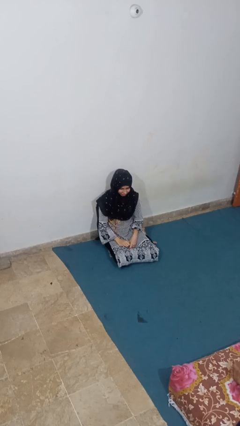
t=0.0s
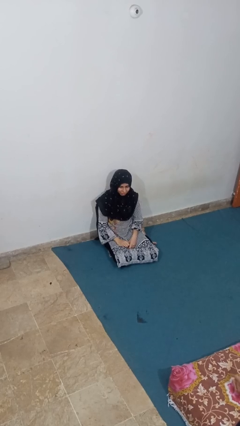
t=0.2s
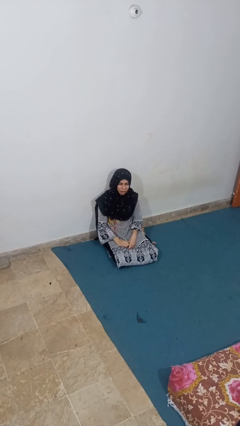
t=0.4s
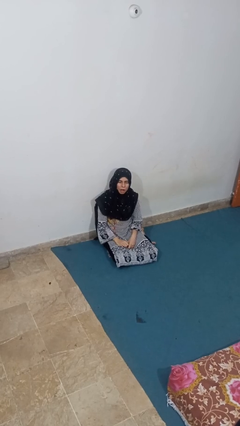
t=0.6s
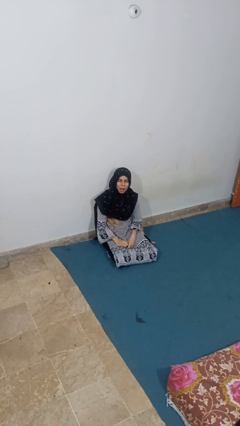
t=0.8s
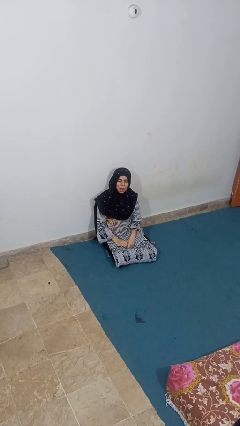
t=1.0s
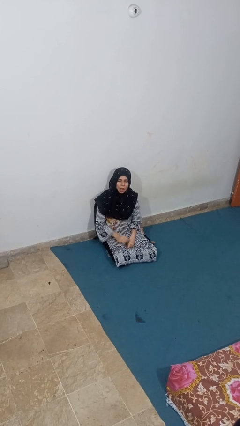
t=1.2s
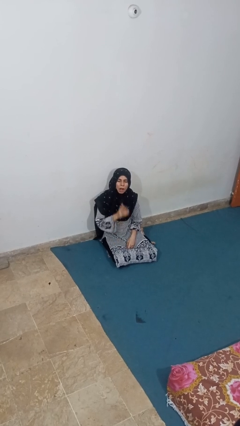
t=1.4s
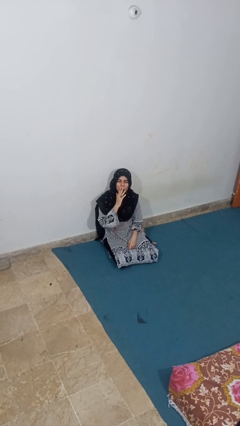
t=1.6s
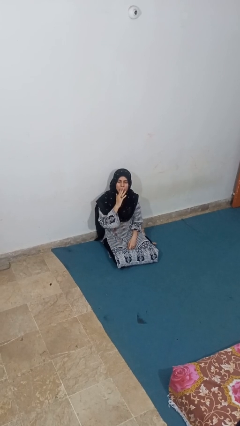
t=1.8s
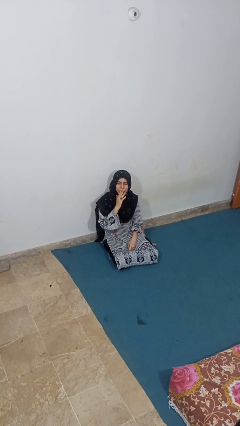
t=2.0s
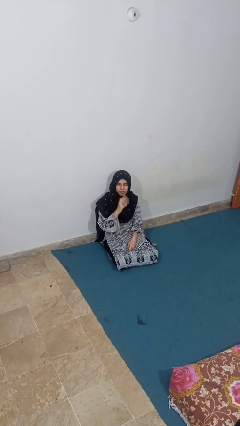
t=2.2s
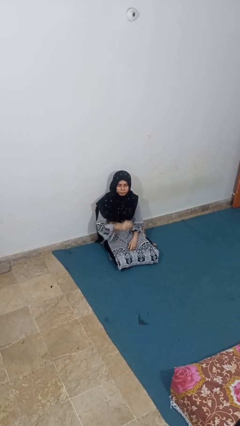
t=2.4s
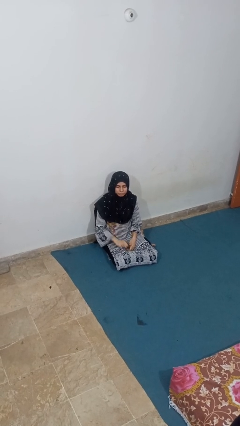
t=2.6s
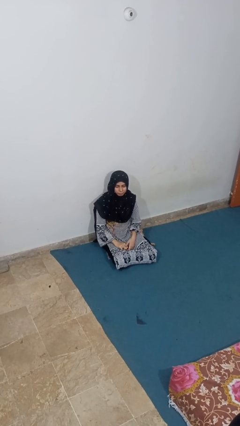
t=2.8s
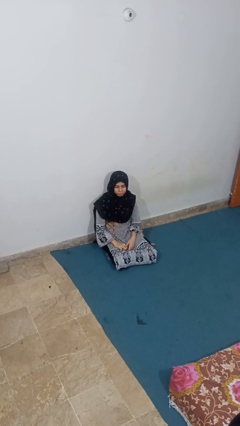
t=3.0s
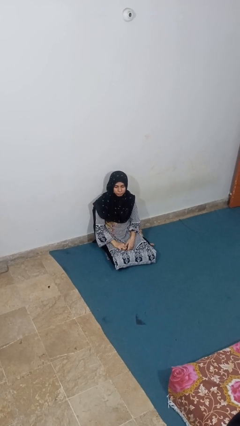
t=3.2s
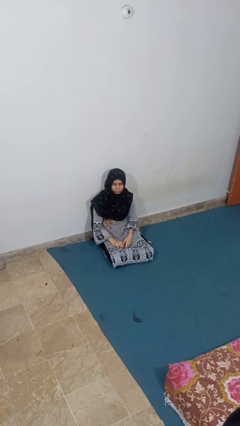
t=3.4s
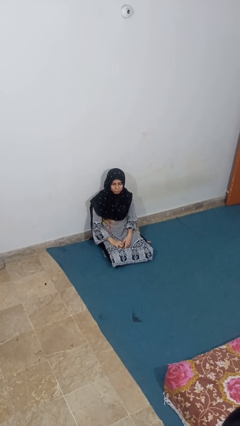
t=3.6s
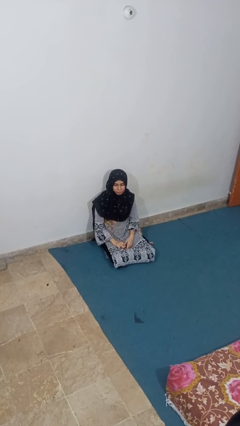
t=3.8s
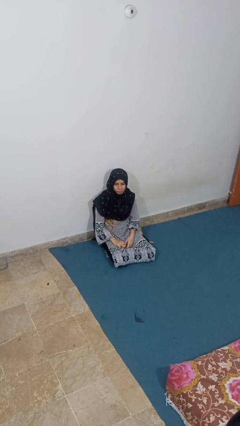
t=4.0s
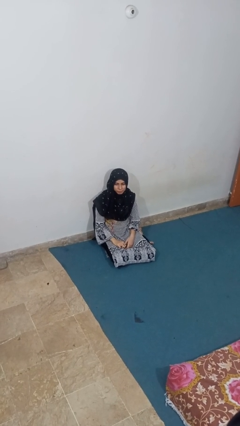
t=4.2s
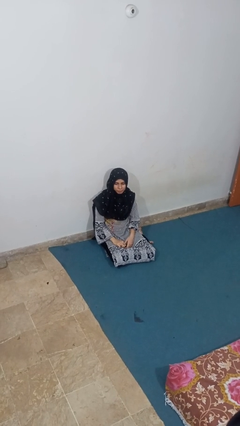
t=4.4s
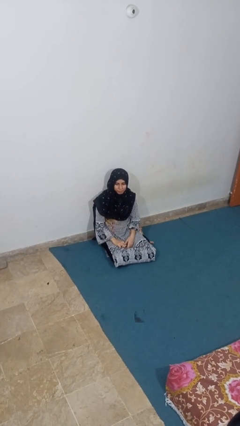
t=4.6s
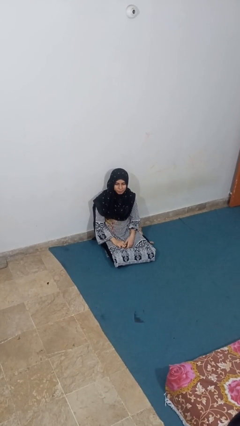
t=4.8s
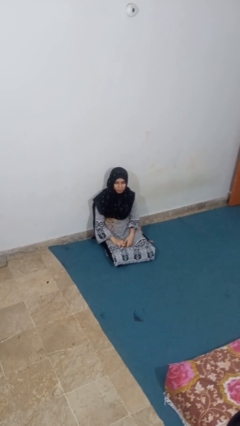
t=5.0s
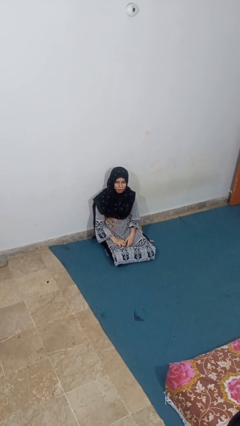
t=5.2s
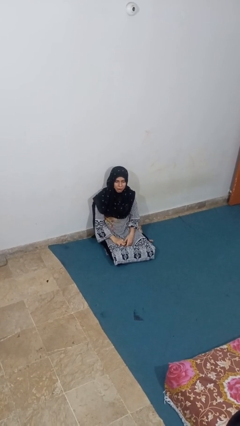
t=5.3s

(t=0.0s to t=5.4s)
person yawns

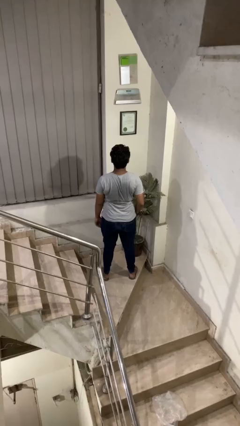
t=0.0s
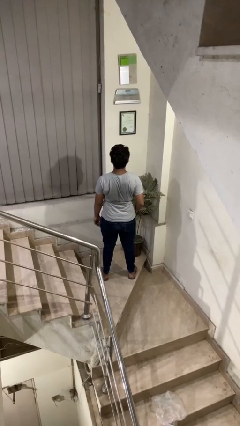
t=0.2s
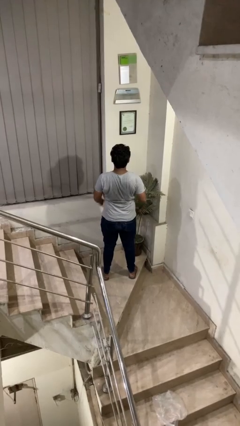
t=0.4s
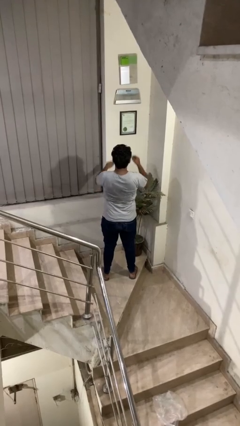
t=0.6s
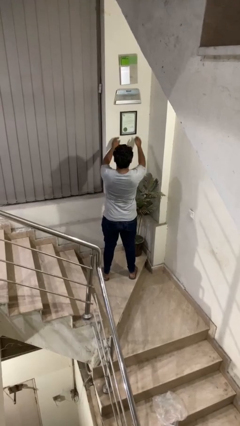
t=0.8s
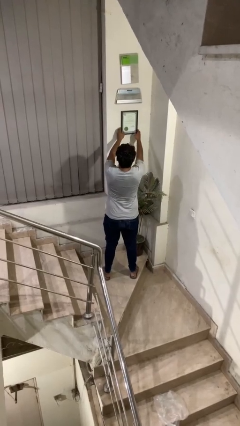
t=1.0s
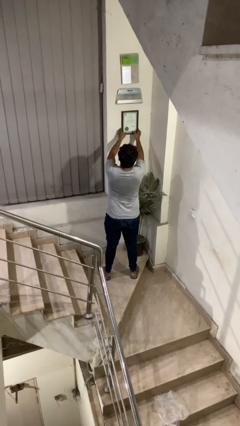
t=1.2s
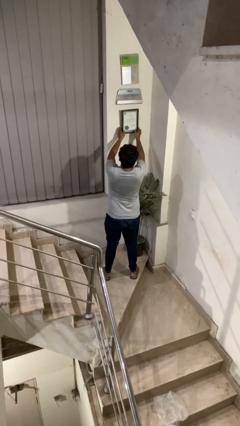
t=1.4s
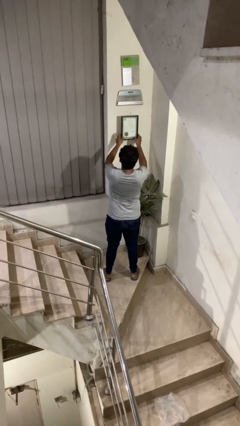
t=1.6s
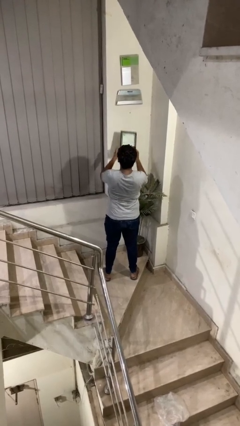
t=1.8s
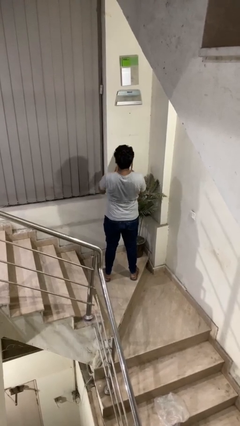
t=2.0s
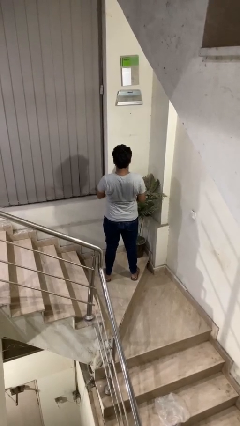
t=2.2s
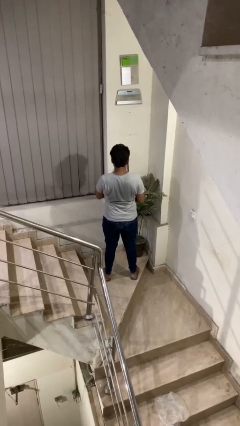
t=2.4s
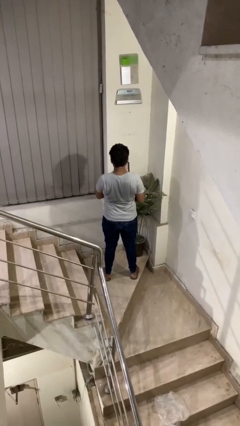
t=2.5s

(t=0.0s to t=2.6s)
person takes down picture frame

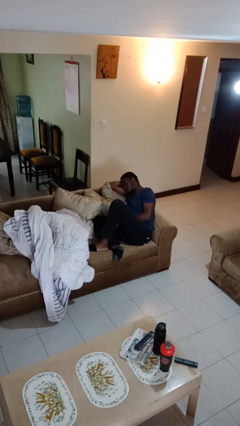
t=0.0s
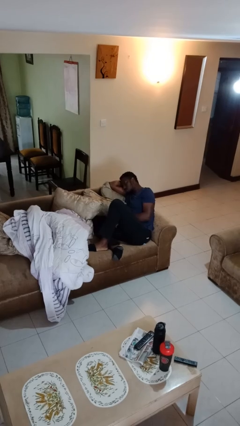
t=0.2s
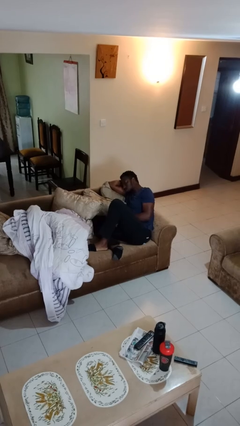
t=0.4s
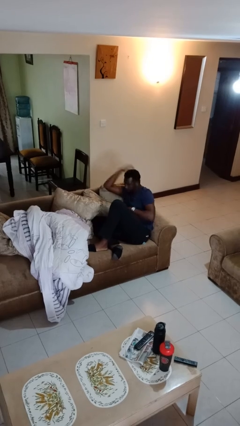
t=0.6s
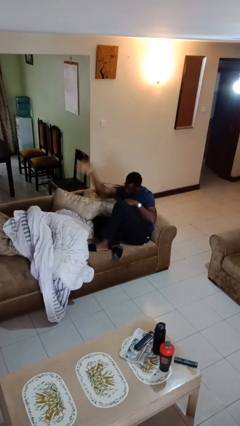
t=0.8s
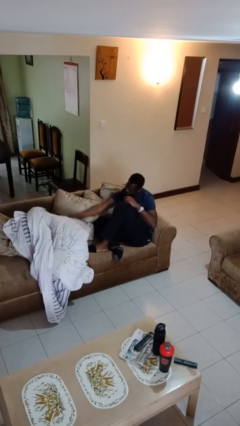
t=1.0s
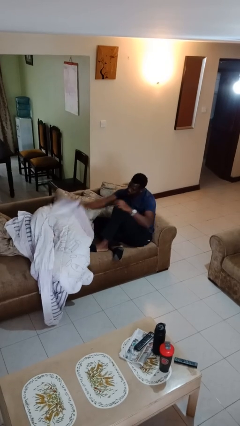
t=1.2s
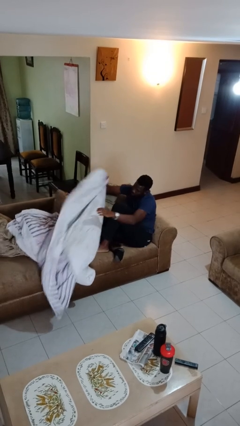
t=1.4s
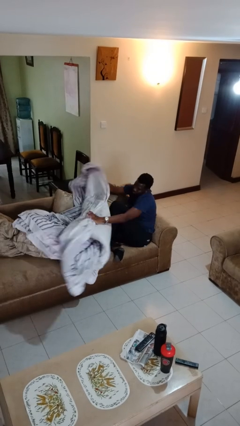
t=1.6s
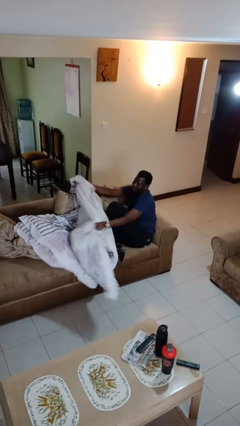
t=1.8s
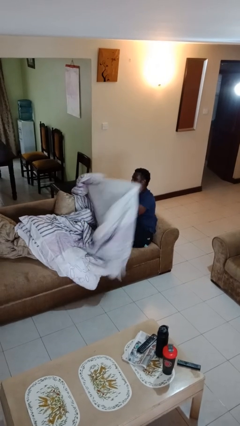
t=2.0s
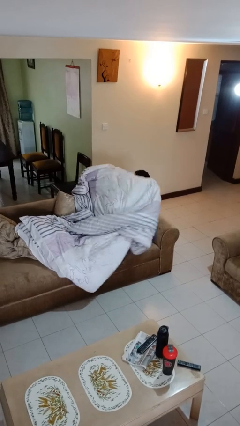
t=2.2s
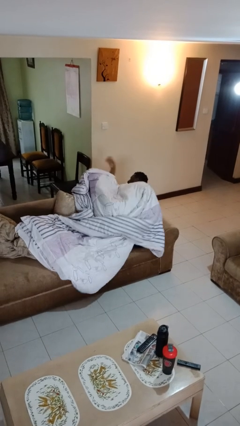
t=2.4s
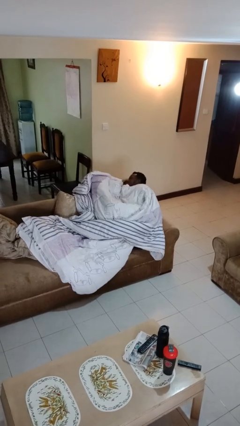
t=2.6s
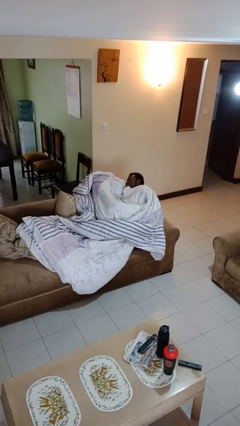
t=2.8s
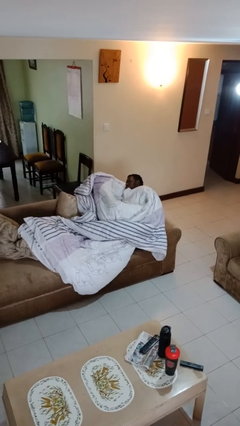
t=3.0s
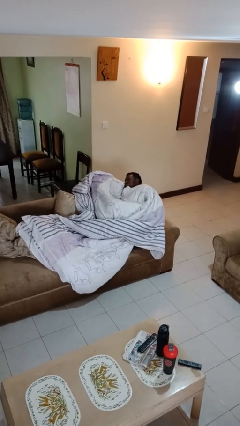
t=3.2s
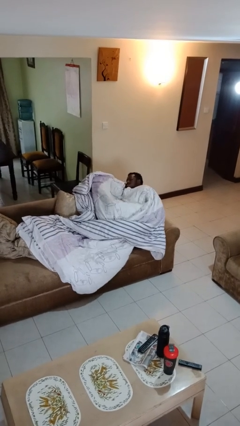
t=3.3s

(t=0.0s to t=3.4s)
person covers with blanket

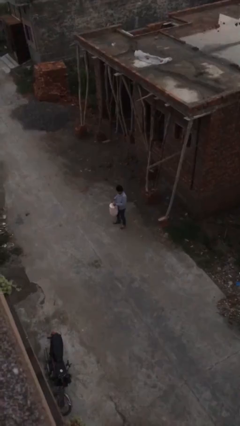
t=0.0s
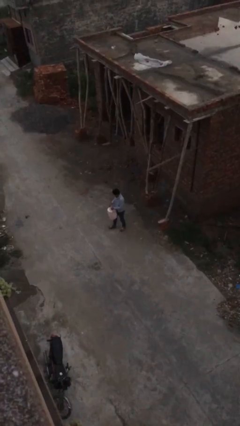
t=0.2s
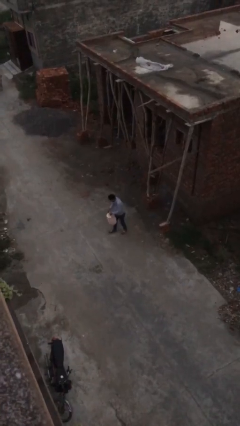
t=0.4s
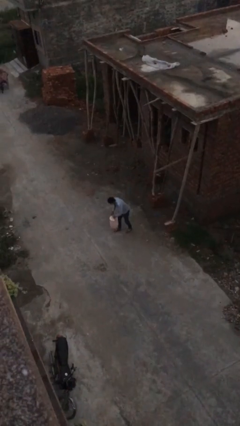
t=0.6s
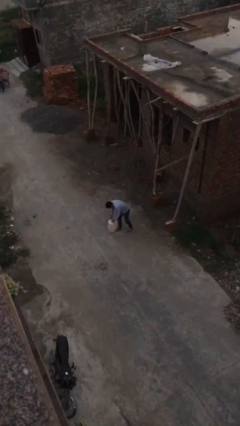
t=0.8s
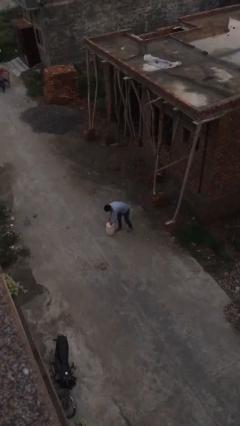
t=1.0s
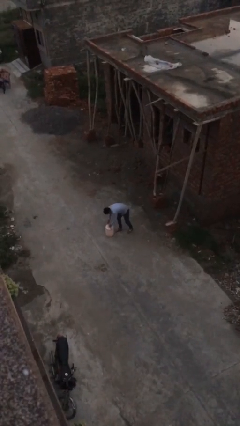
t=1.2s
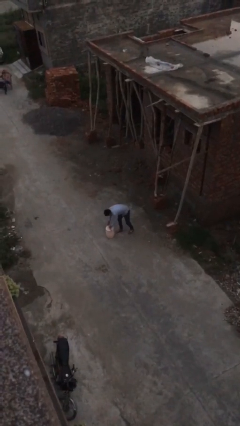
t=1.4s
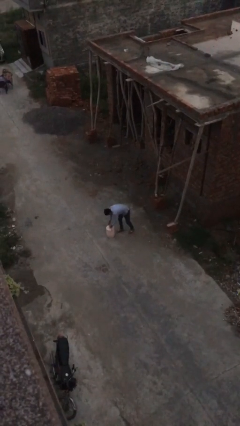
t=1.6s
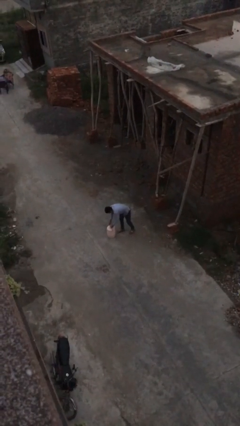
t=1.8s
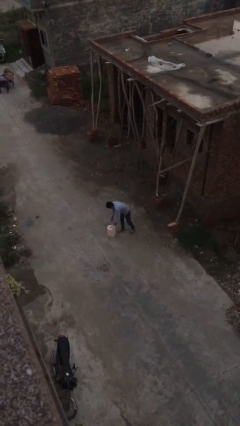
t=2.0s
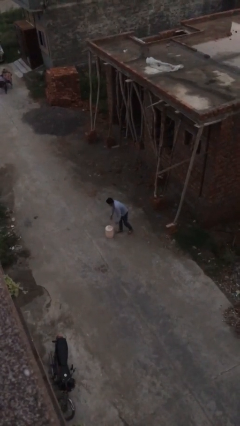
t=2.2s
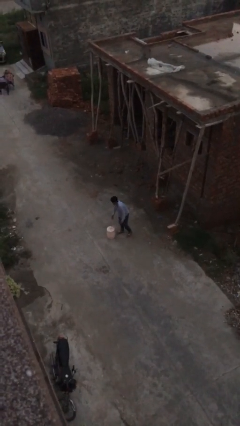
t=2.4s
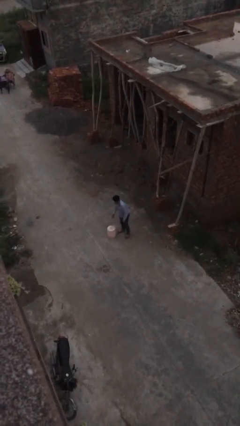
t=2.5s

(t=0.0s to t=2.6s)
person puts down object on floor

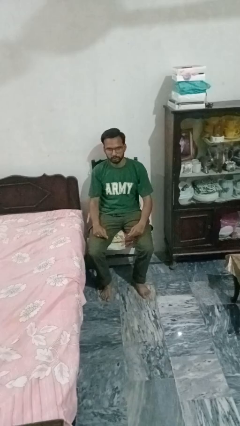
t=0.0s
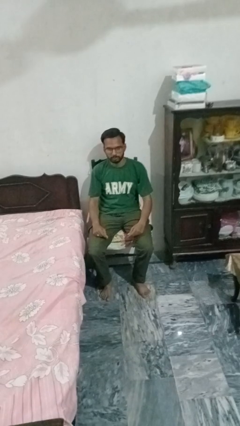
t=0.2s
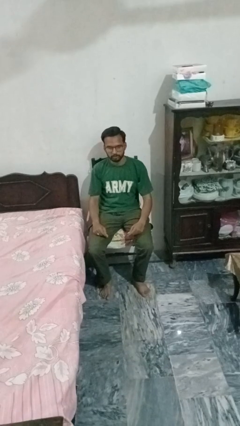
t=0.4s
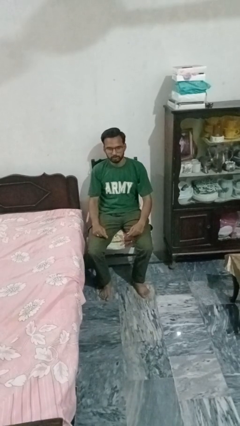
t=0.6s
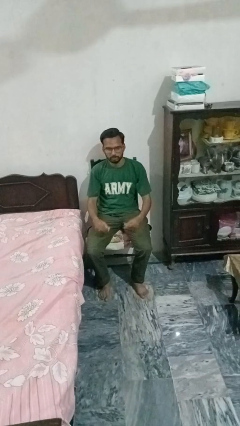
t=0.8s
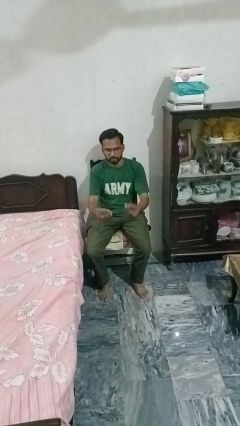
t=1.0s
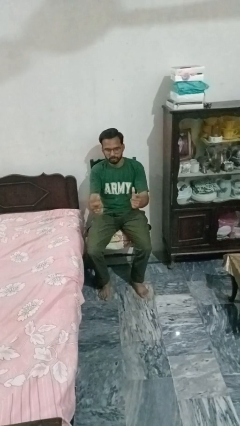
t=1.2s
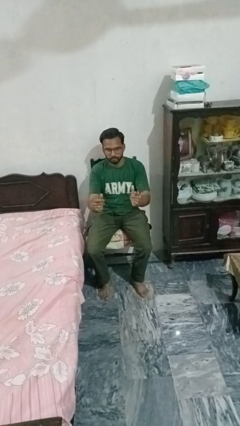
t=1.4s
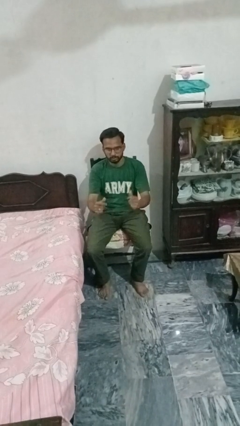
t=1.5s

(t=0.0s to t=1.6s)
person snaps fingers

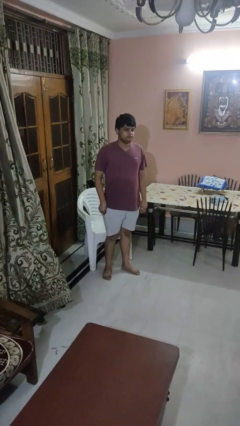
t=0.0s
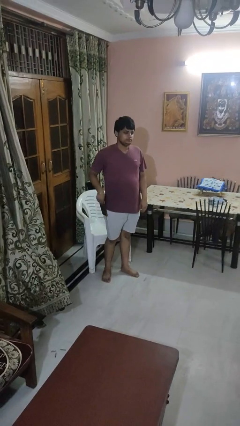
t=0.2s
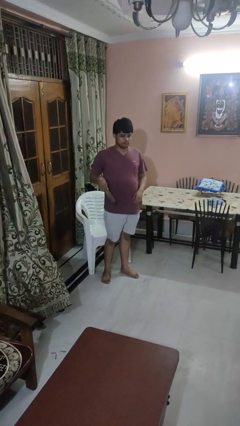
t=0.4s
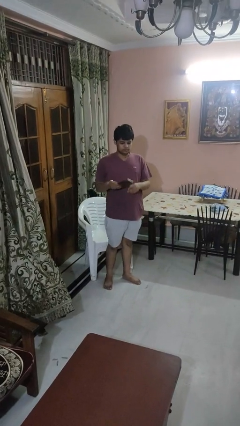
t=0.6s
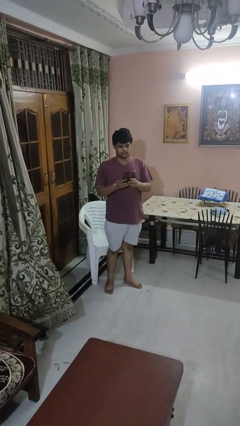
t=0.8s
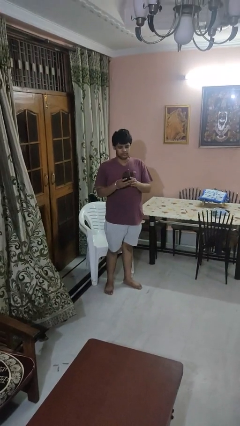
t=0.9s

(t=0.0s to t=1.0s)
person takes phone from pocket

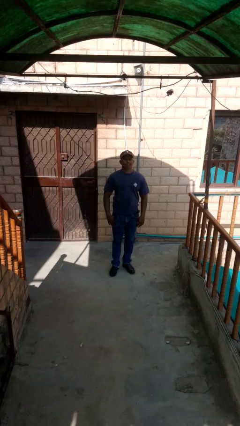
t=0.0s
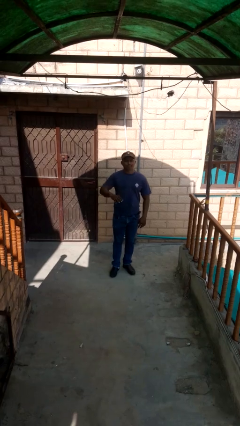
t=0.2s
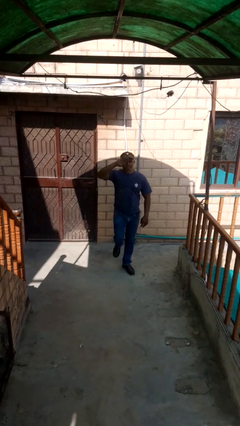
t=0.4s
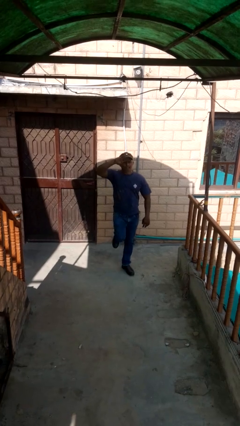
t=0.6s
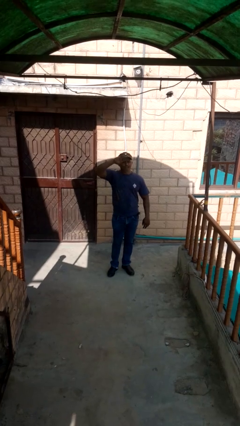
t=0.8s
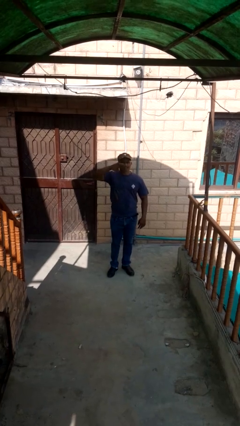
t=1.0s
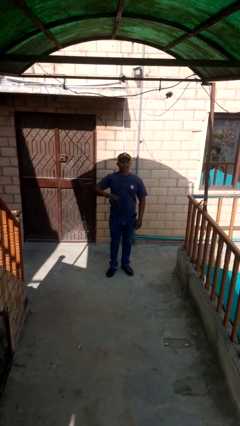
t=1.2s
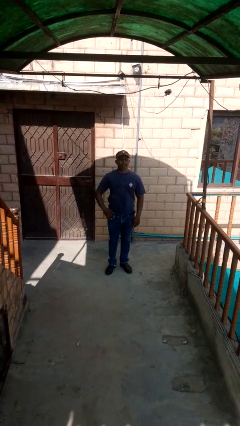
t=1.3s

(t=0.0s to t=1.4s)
person salutes
